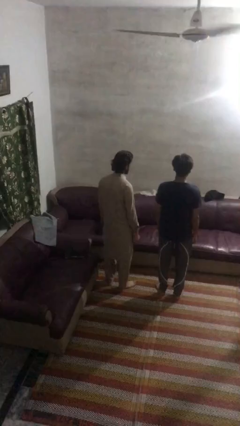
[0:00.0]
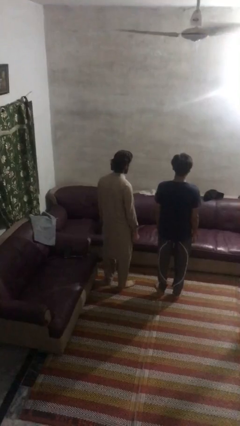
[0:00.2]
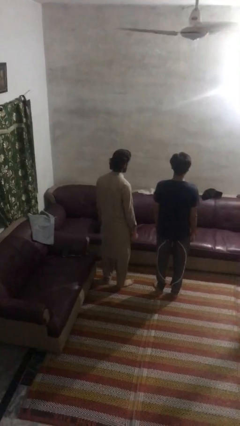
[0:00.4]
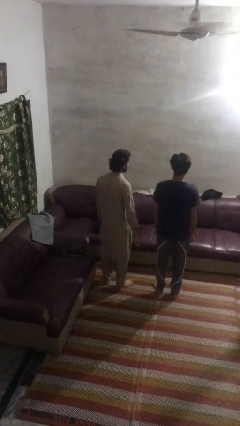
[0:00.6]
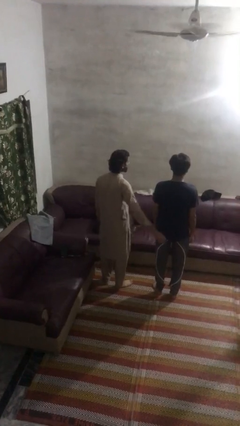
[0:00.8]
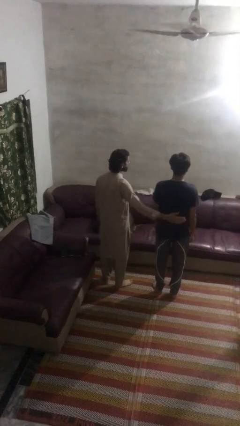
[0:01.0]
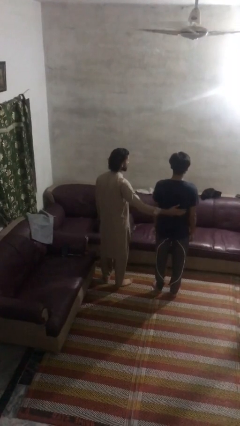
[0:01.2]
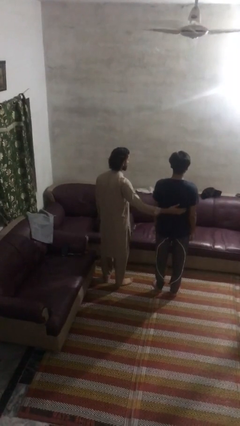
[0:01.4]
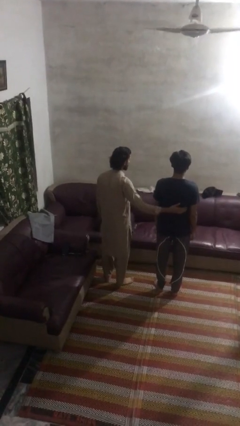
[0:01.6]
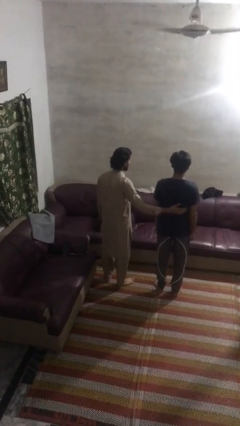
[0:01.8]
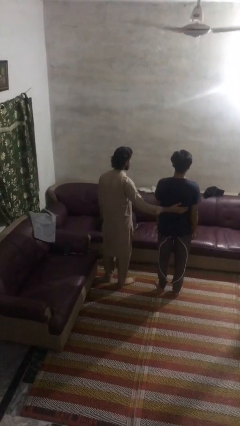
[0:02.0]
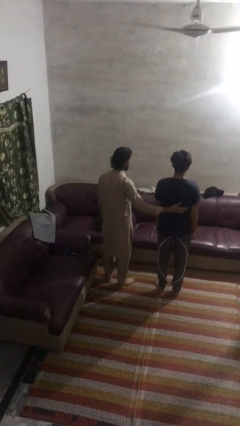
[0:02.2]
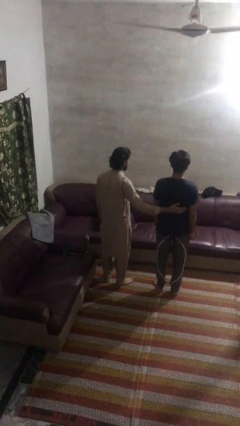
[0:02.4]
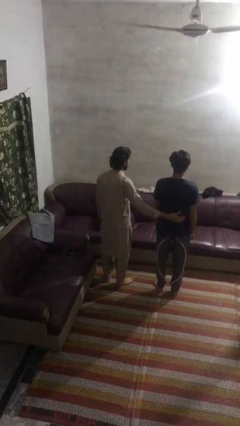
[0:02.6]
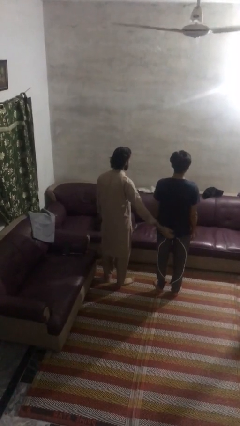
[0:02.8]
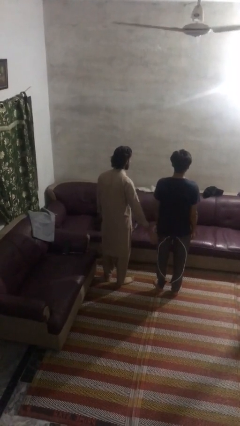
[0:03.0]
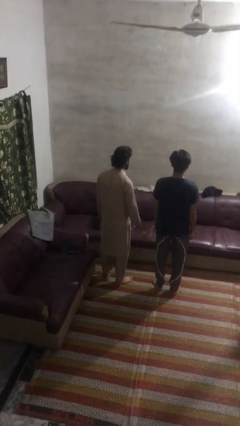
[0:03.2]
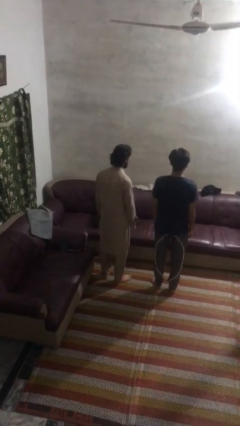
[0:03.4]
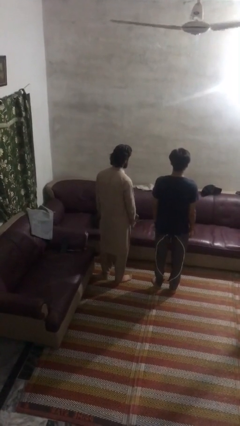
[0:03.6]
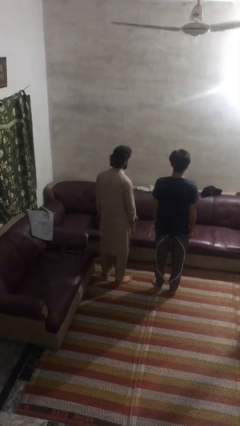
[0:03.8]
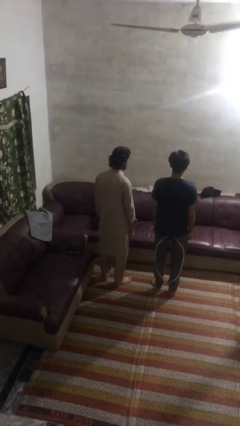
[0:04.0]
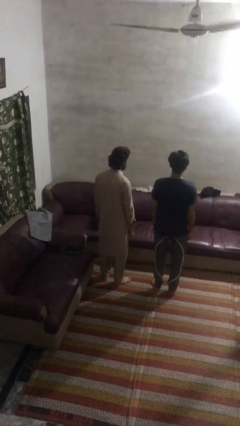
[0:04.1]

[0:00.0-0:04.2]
person touches back of person

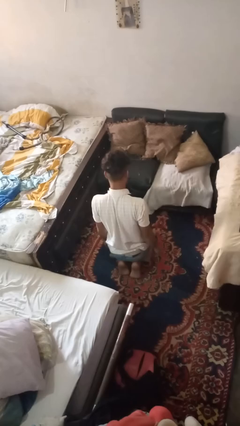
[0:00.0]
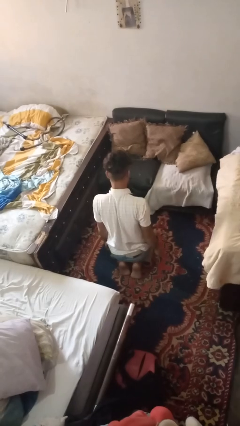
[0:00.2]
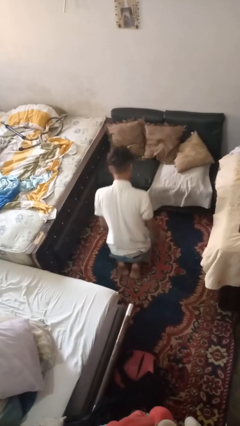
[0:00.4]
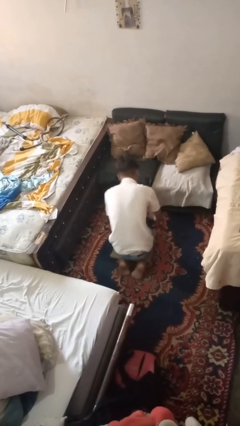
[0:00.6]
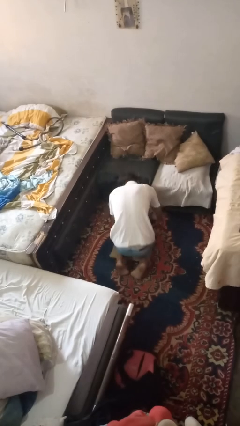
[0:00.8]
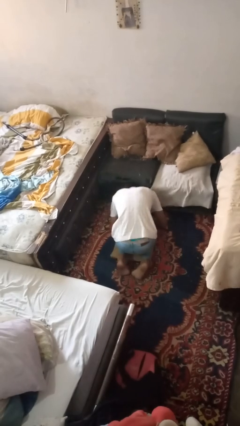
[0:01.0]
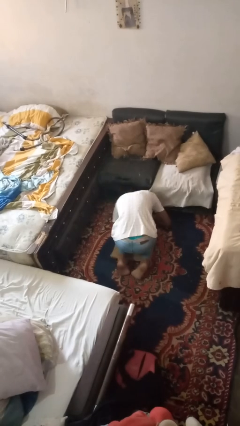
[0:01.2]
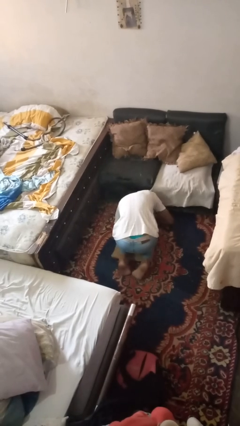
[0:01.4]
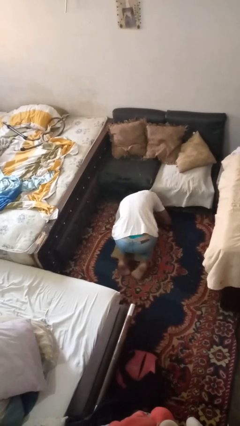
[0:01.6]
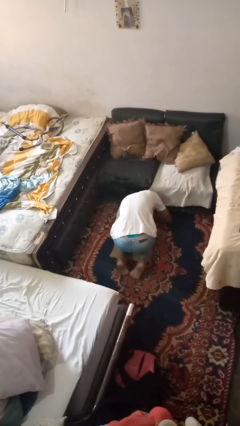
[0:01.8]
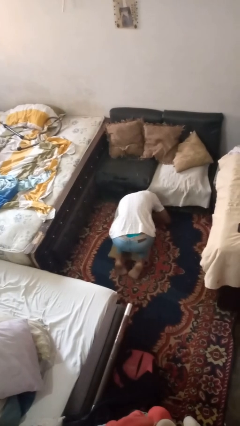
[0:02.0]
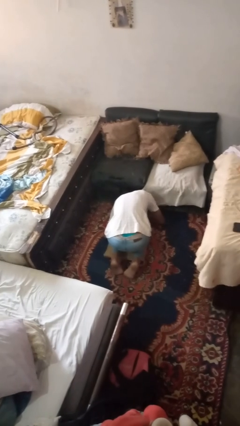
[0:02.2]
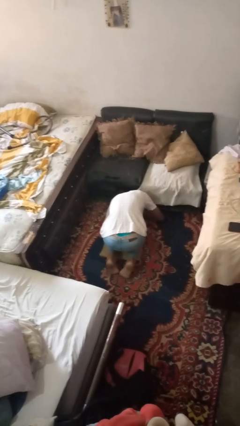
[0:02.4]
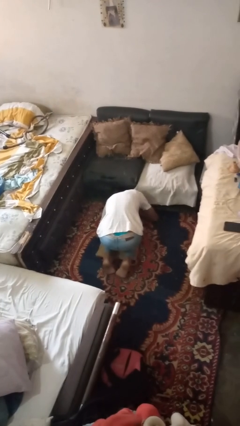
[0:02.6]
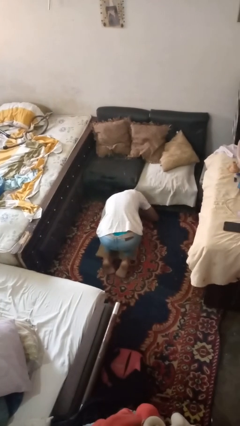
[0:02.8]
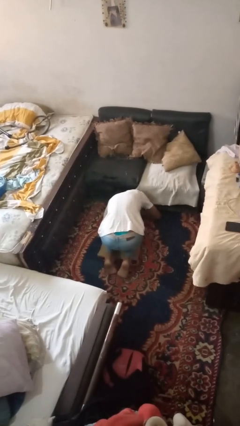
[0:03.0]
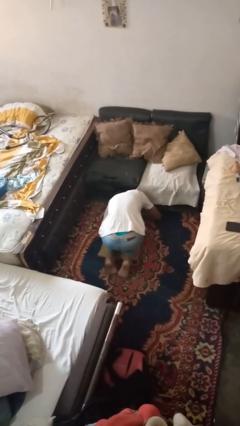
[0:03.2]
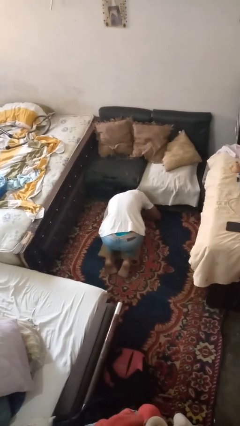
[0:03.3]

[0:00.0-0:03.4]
person searches under couch

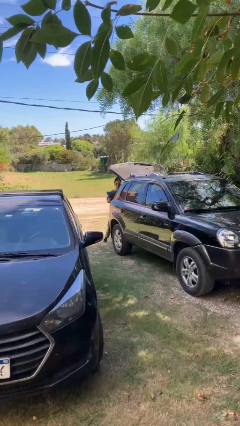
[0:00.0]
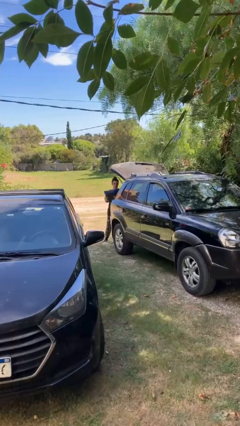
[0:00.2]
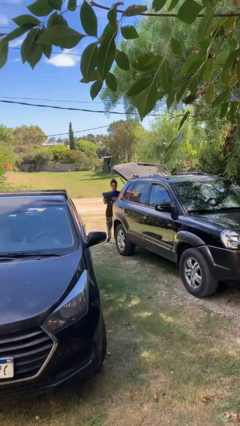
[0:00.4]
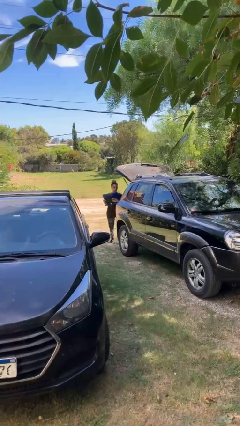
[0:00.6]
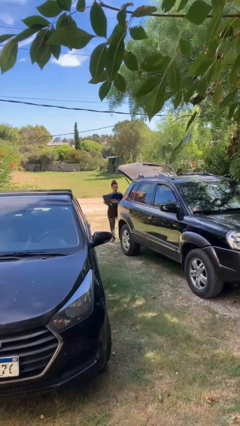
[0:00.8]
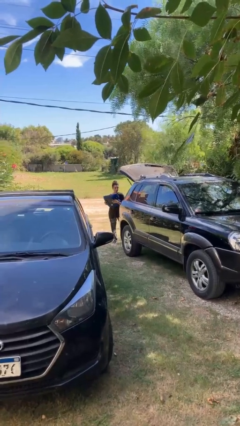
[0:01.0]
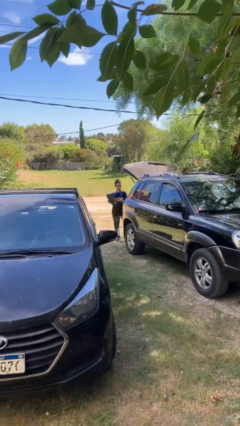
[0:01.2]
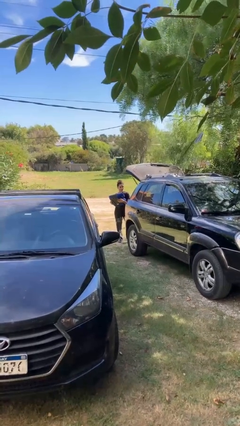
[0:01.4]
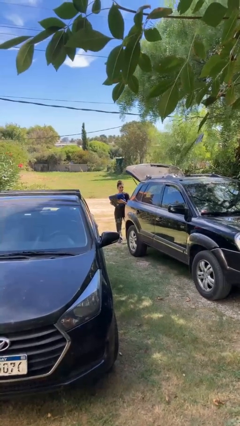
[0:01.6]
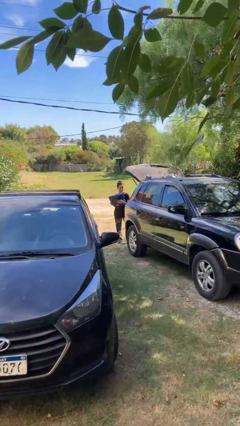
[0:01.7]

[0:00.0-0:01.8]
person unloads car

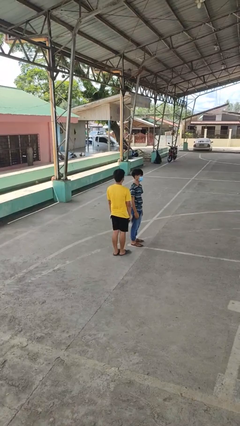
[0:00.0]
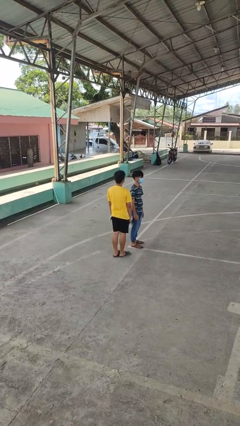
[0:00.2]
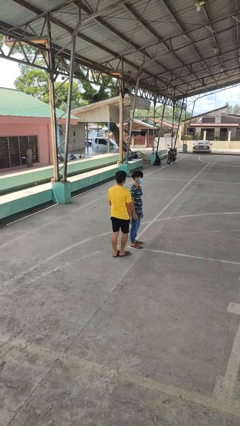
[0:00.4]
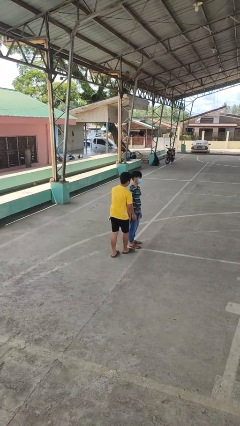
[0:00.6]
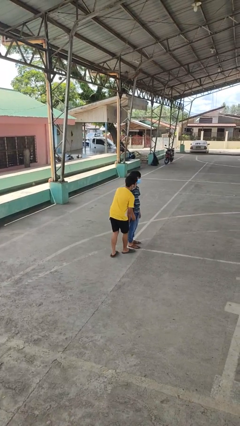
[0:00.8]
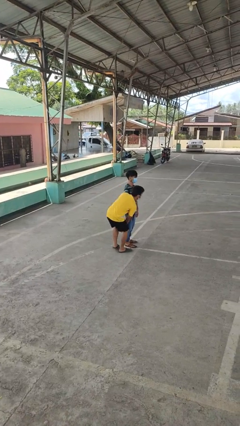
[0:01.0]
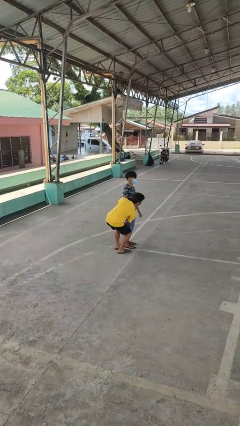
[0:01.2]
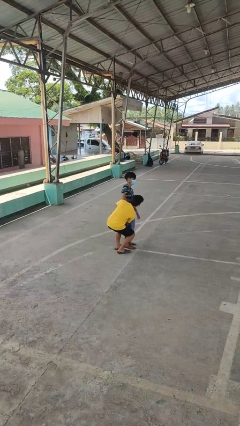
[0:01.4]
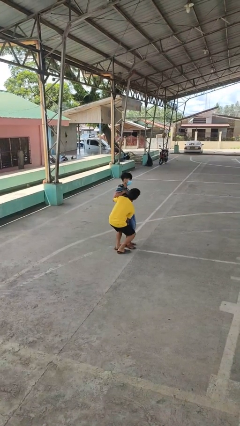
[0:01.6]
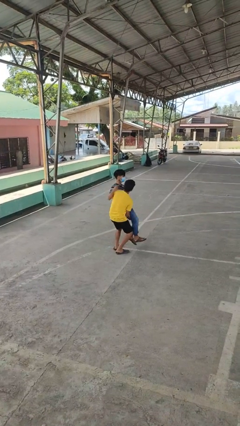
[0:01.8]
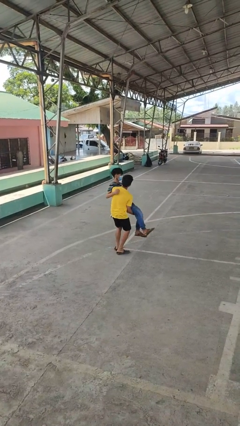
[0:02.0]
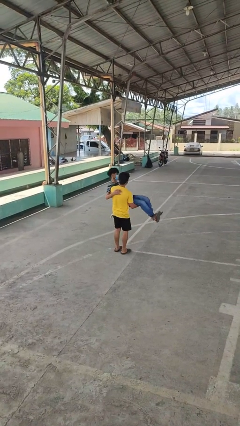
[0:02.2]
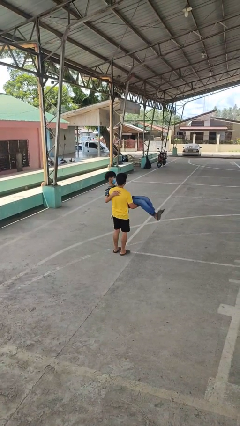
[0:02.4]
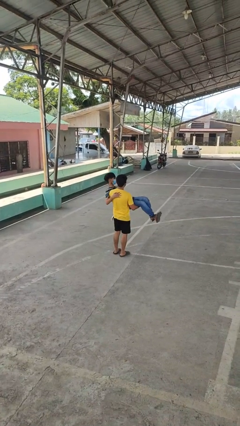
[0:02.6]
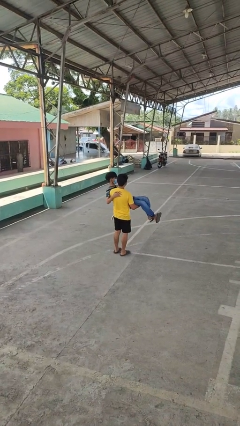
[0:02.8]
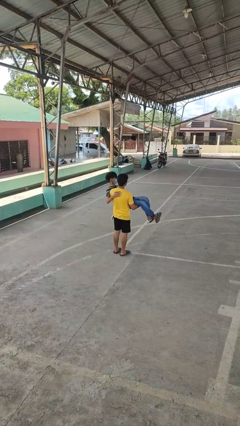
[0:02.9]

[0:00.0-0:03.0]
person picks up person

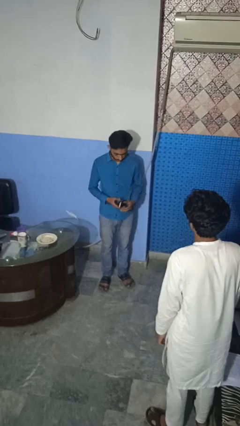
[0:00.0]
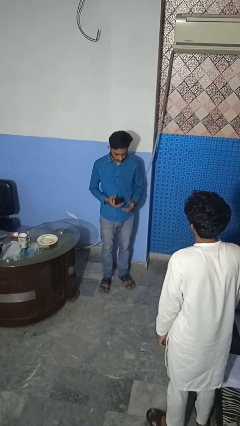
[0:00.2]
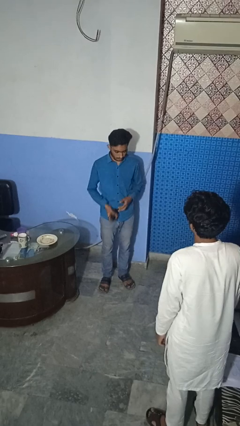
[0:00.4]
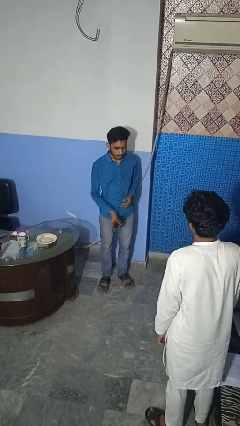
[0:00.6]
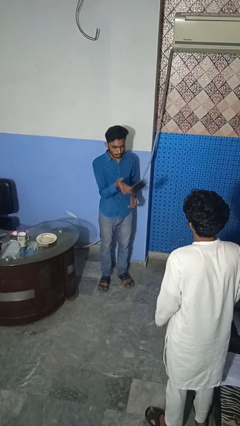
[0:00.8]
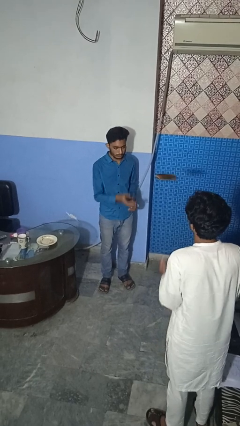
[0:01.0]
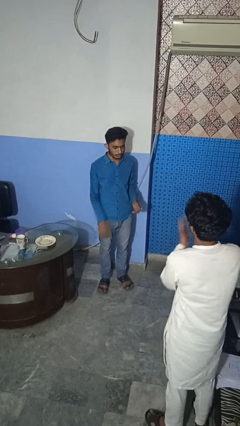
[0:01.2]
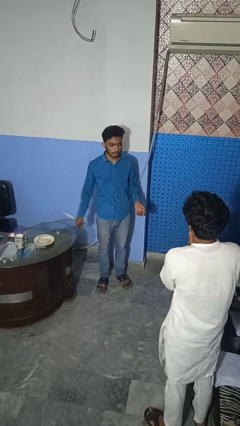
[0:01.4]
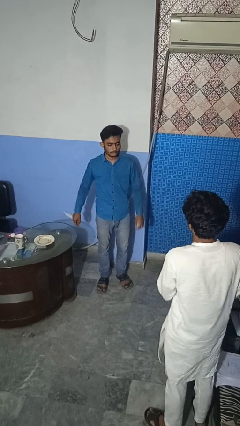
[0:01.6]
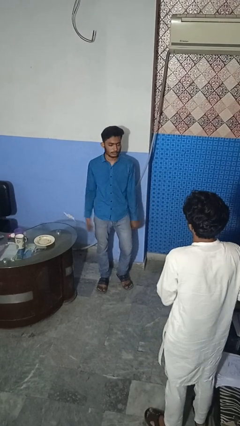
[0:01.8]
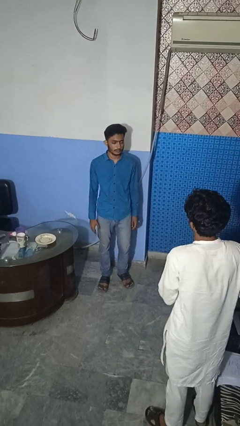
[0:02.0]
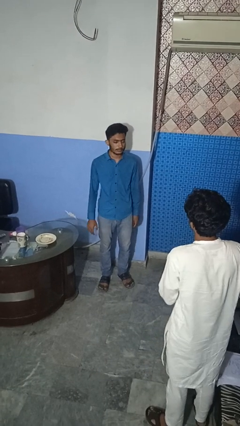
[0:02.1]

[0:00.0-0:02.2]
person throws object to person

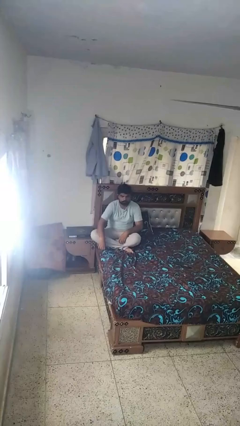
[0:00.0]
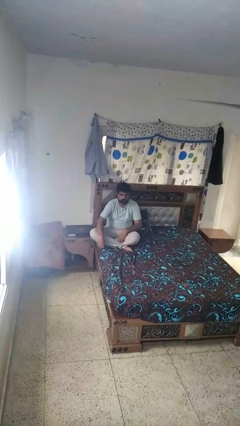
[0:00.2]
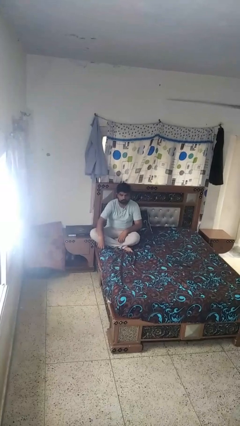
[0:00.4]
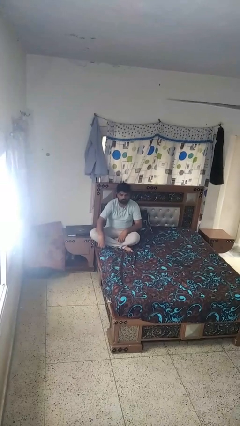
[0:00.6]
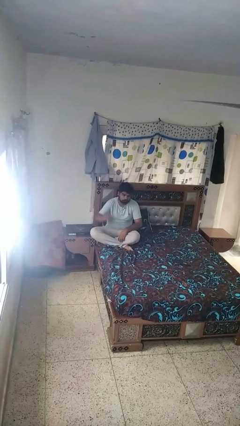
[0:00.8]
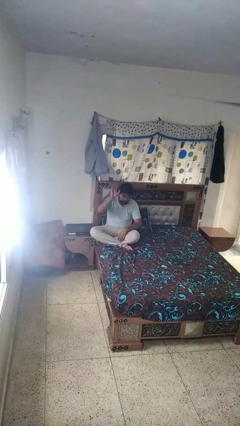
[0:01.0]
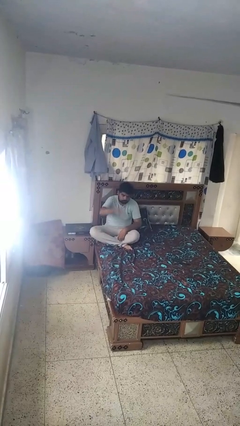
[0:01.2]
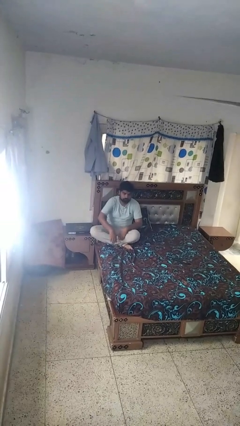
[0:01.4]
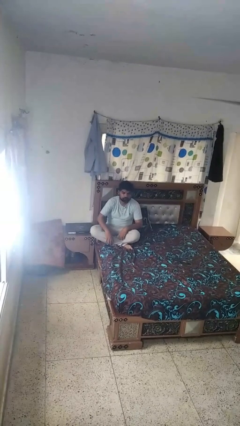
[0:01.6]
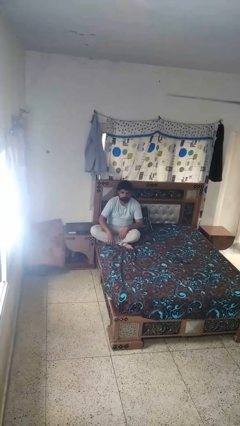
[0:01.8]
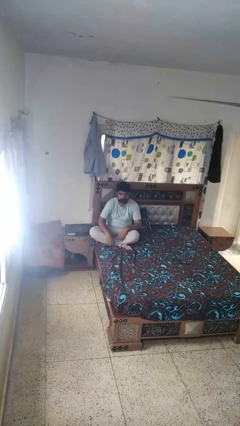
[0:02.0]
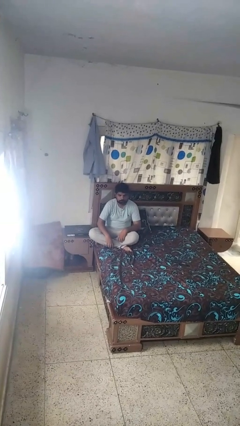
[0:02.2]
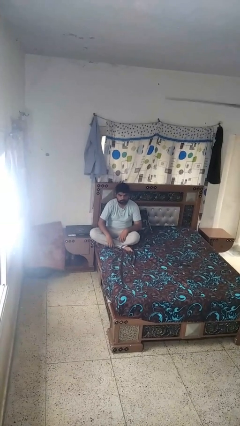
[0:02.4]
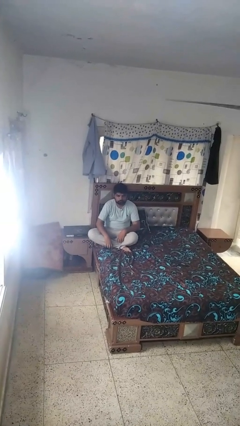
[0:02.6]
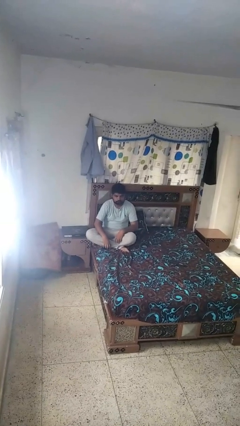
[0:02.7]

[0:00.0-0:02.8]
person gestures swipe down

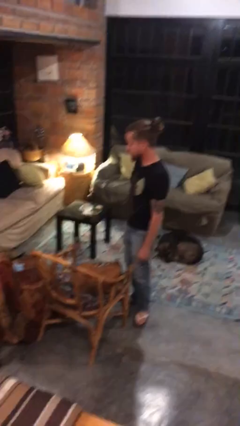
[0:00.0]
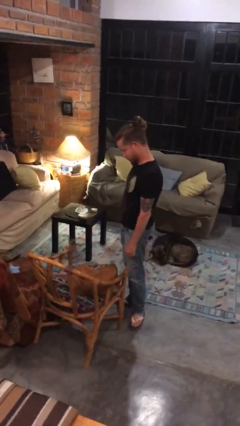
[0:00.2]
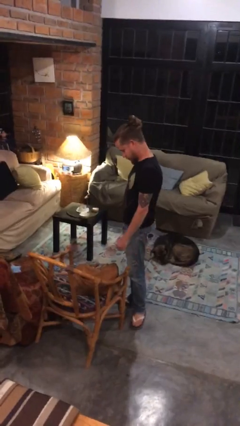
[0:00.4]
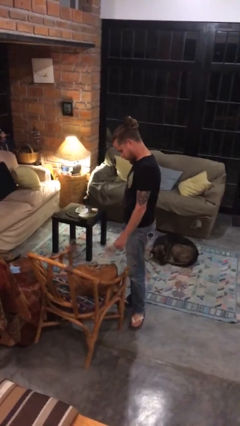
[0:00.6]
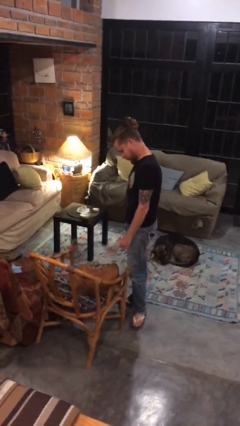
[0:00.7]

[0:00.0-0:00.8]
person puts object into purse
